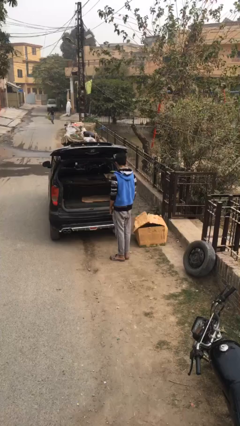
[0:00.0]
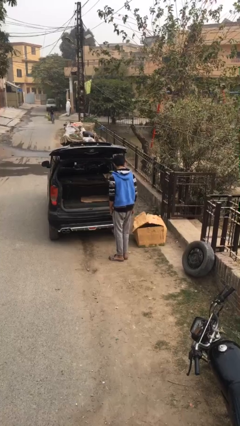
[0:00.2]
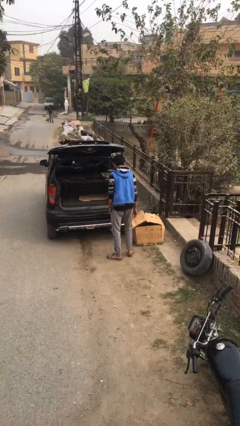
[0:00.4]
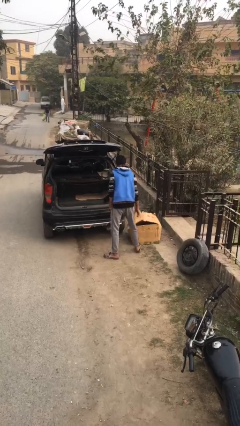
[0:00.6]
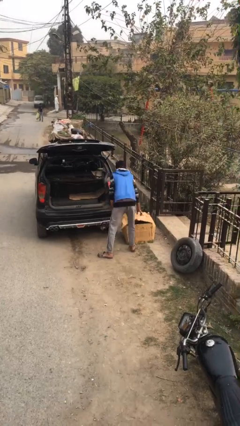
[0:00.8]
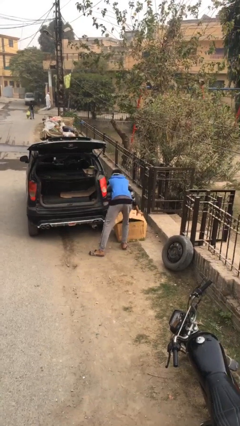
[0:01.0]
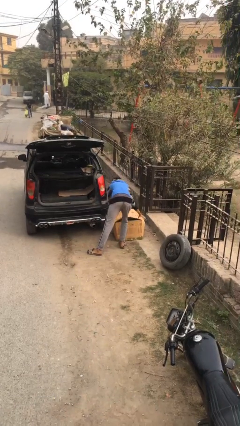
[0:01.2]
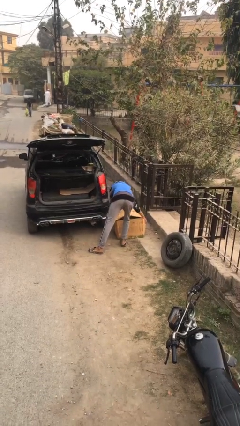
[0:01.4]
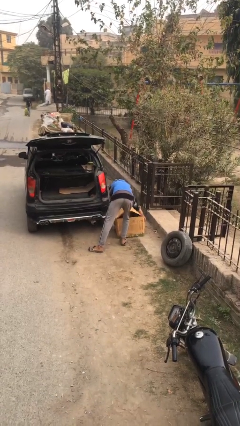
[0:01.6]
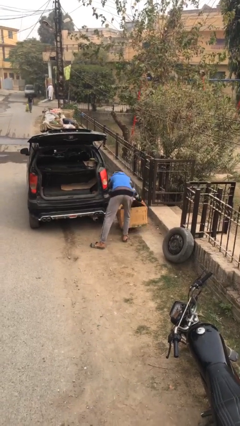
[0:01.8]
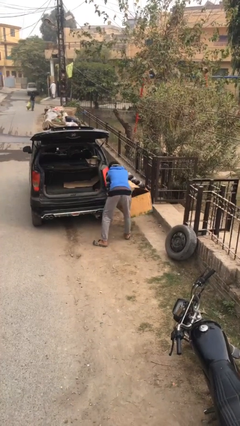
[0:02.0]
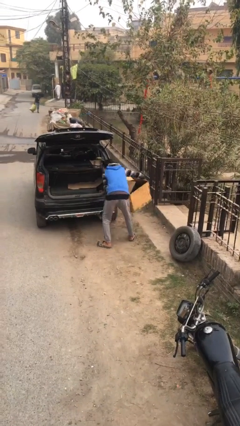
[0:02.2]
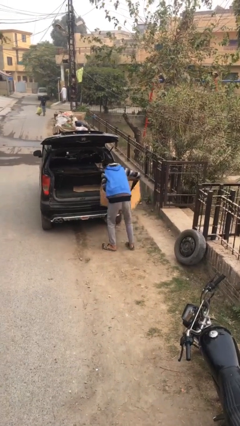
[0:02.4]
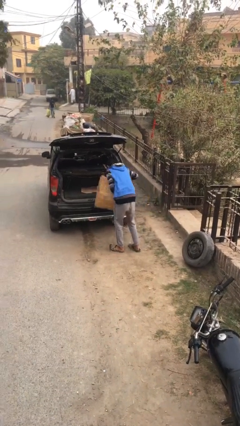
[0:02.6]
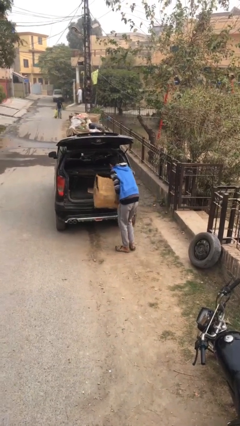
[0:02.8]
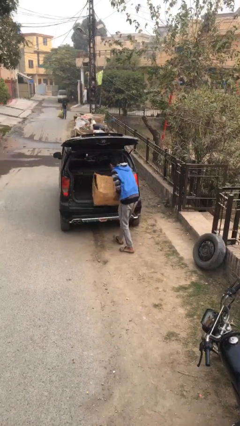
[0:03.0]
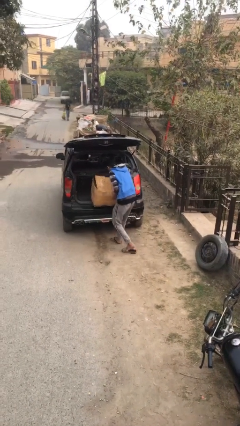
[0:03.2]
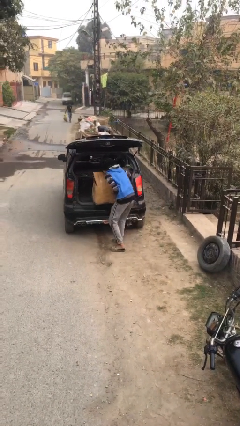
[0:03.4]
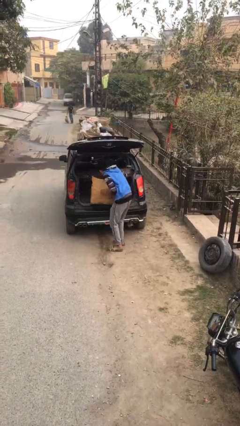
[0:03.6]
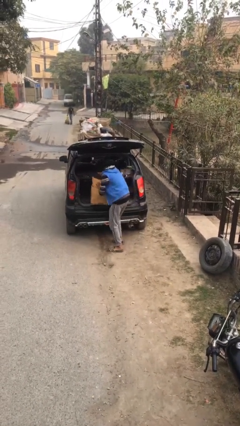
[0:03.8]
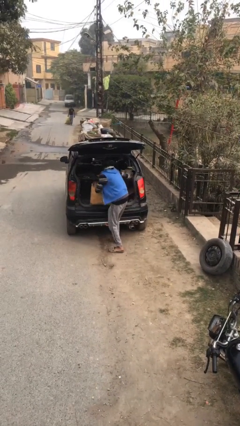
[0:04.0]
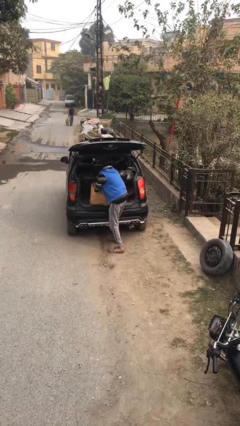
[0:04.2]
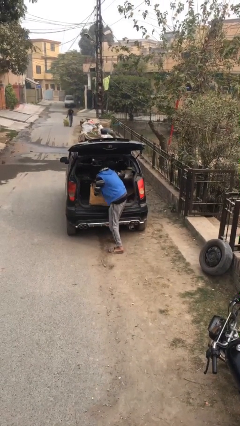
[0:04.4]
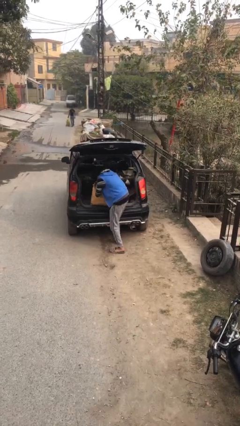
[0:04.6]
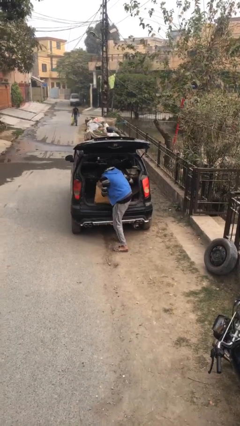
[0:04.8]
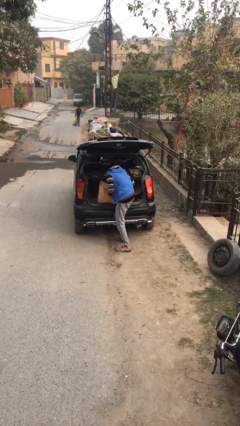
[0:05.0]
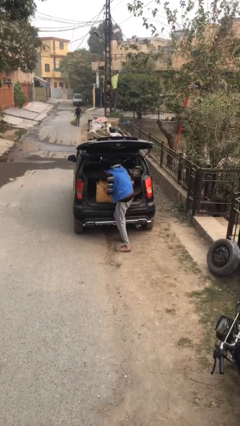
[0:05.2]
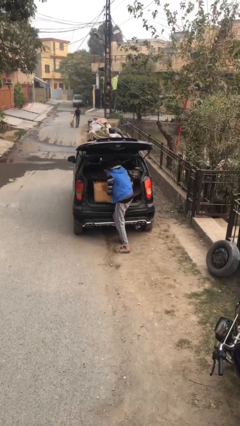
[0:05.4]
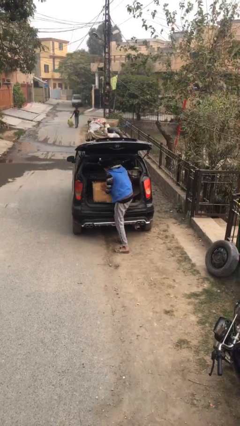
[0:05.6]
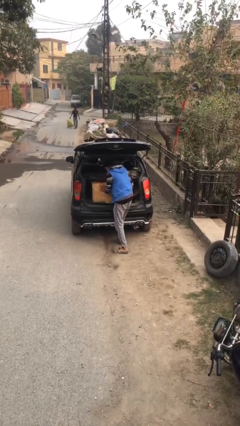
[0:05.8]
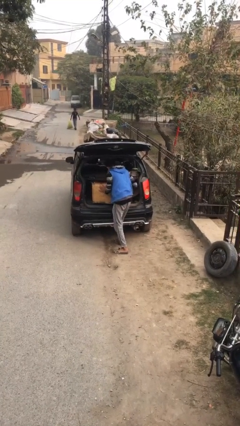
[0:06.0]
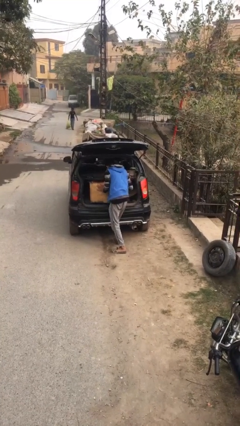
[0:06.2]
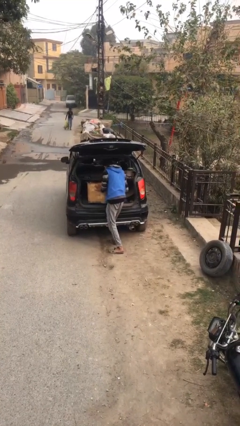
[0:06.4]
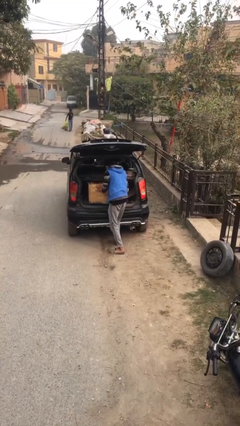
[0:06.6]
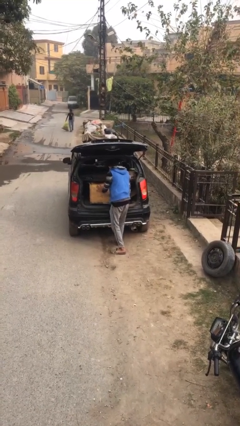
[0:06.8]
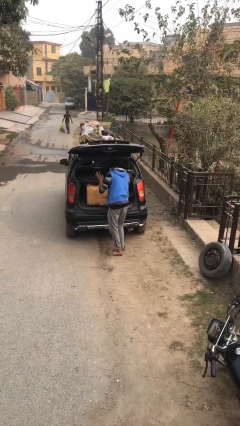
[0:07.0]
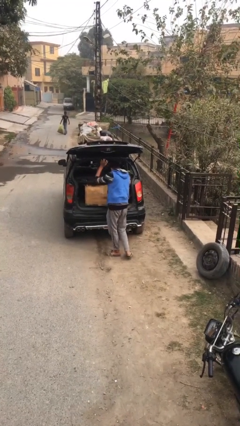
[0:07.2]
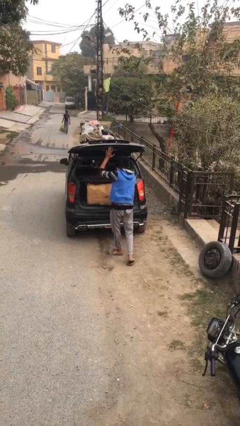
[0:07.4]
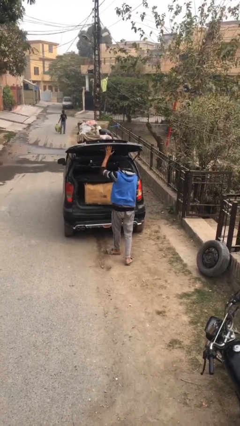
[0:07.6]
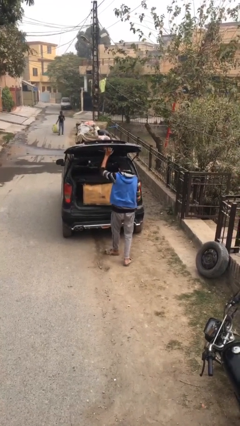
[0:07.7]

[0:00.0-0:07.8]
person loads car

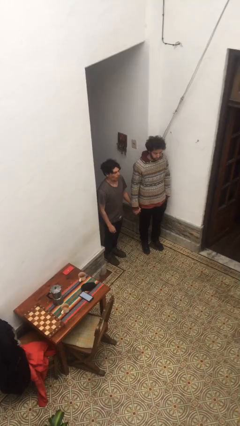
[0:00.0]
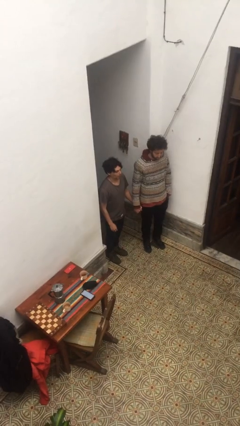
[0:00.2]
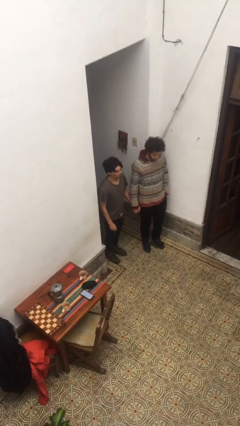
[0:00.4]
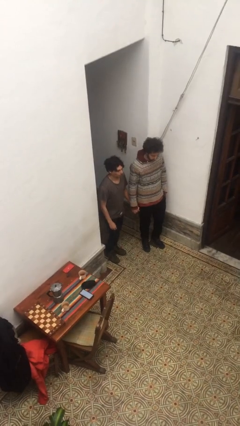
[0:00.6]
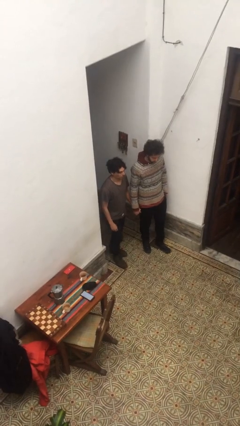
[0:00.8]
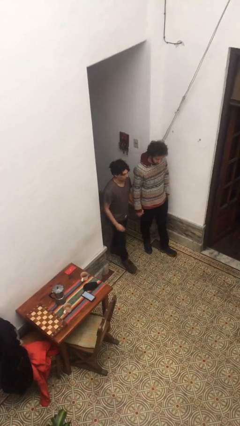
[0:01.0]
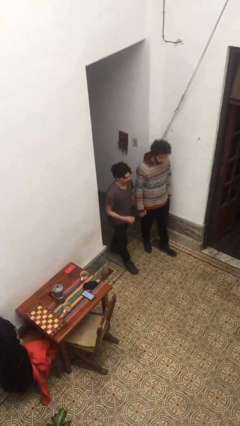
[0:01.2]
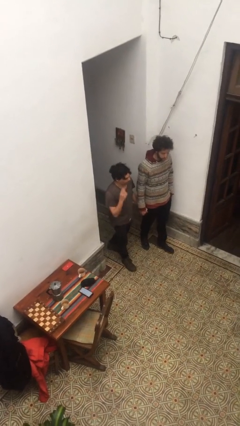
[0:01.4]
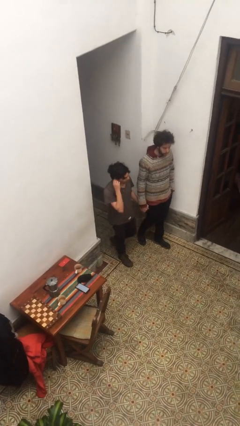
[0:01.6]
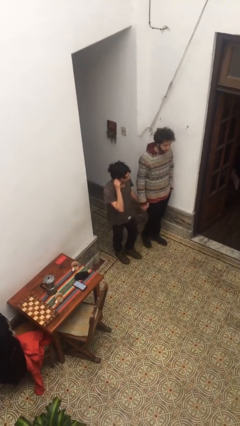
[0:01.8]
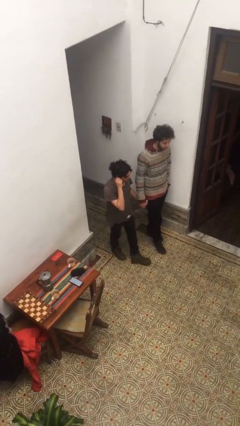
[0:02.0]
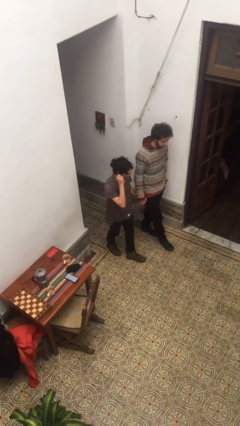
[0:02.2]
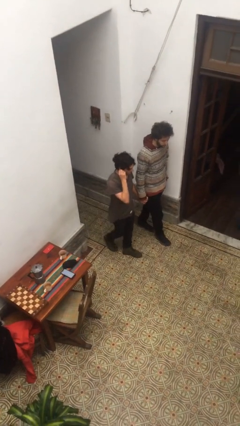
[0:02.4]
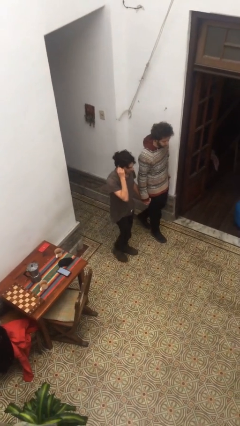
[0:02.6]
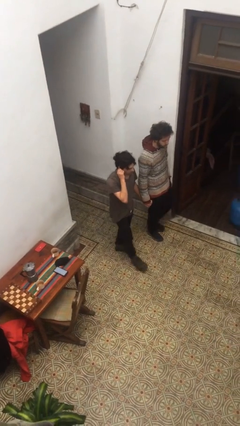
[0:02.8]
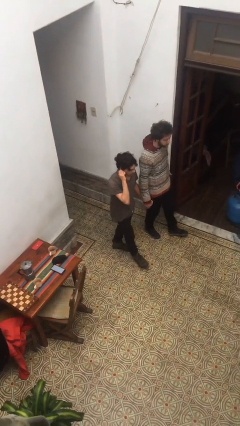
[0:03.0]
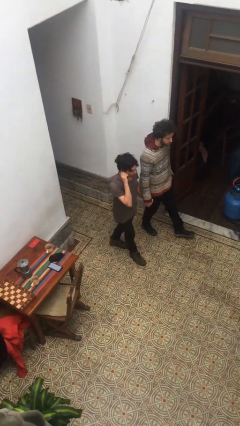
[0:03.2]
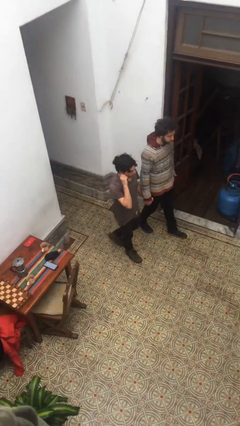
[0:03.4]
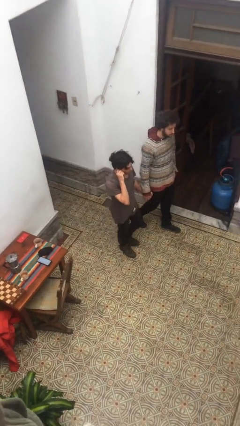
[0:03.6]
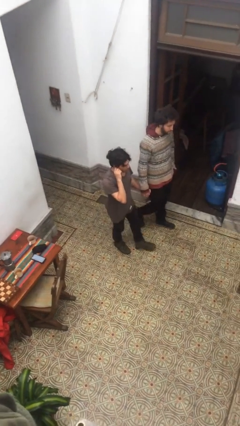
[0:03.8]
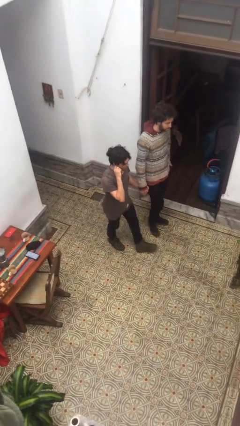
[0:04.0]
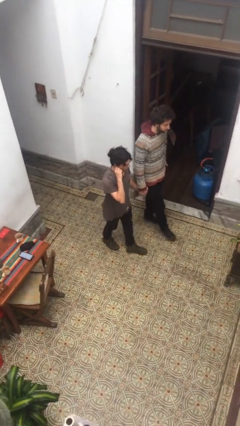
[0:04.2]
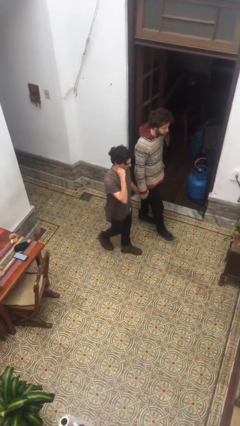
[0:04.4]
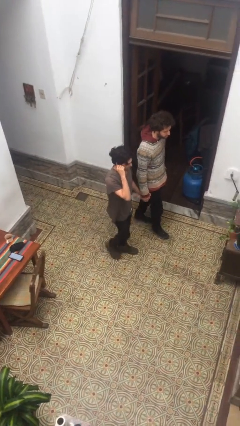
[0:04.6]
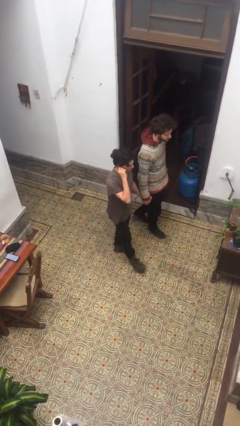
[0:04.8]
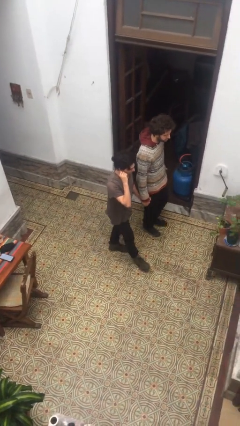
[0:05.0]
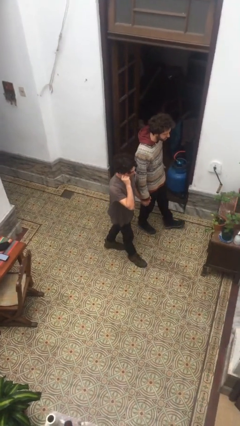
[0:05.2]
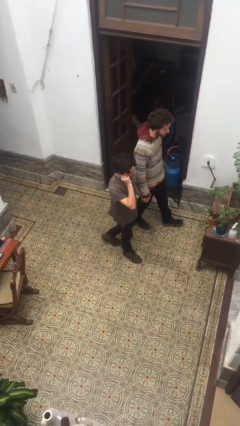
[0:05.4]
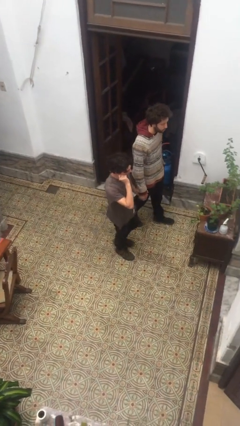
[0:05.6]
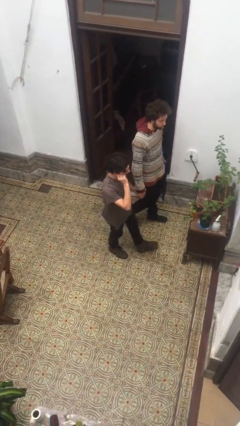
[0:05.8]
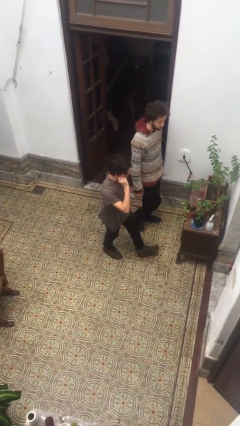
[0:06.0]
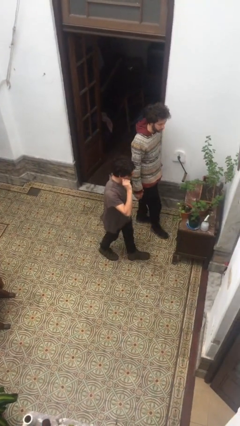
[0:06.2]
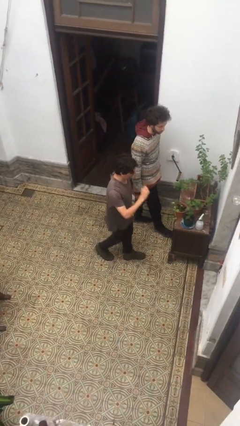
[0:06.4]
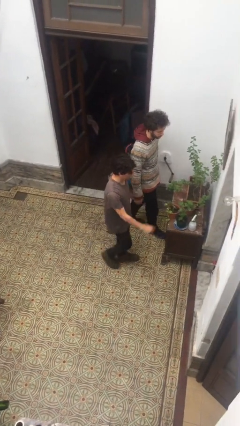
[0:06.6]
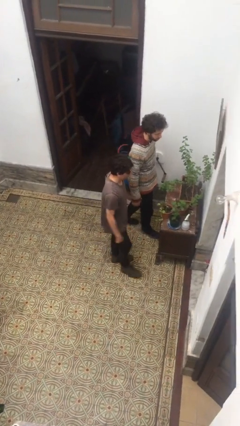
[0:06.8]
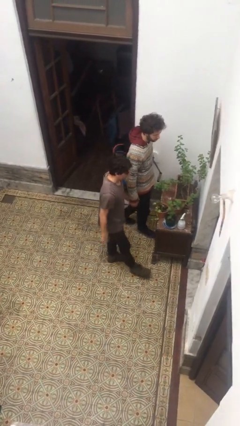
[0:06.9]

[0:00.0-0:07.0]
person holds hand

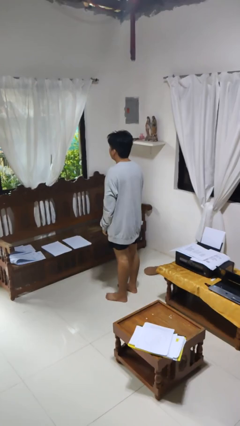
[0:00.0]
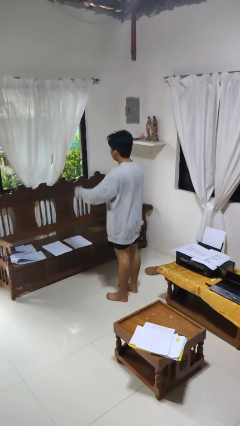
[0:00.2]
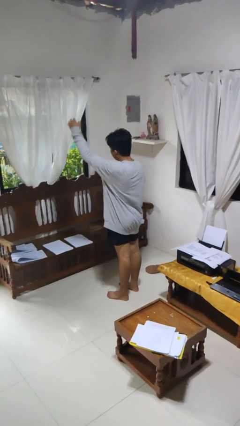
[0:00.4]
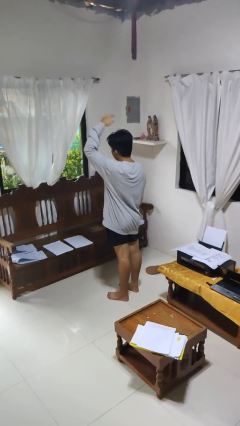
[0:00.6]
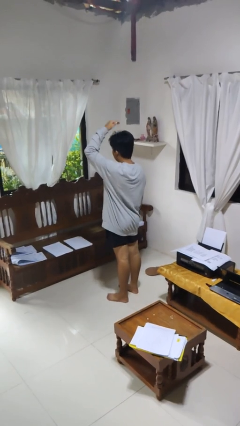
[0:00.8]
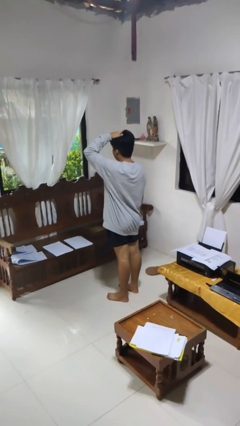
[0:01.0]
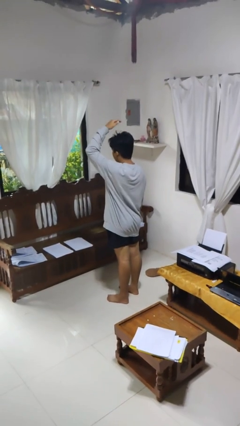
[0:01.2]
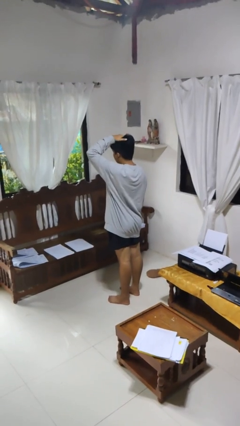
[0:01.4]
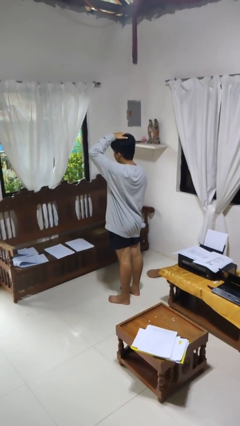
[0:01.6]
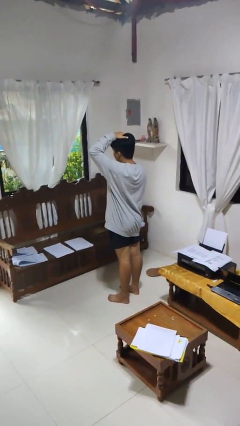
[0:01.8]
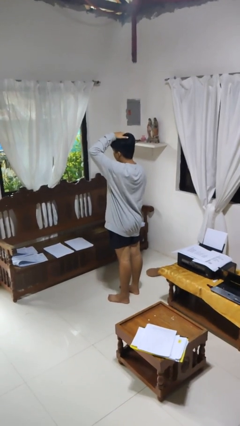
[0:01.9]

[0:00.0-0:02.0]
person pats head

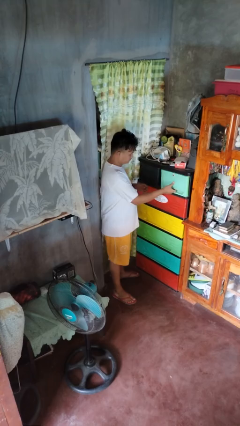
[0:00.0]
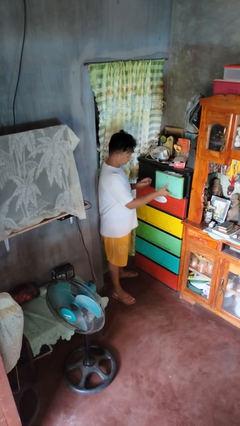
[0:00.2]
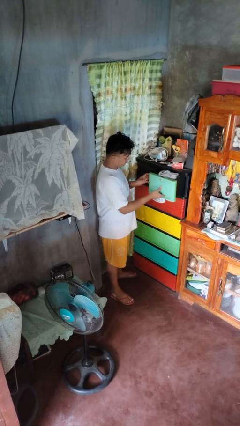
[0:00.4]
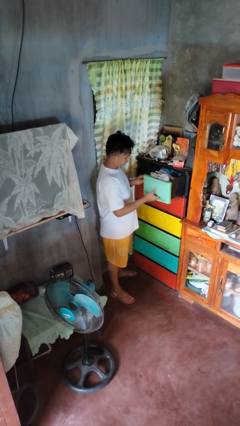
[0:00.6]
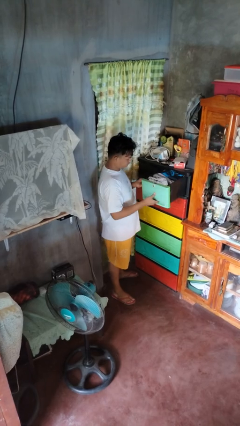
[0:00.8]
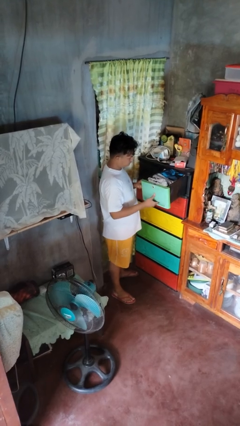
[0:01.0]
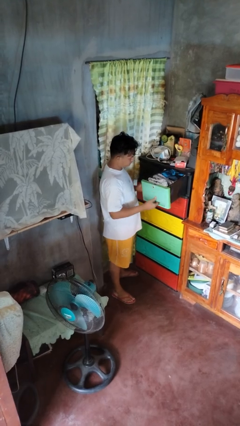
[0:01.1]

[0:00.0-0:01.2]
person opens dresser drawer
